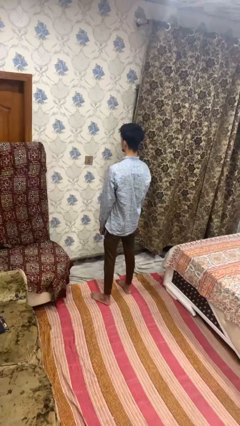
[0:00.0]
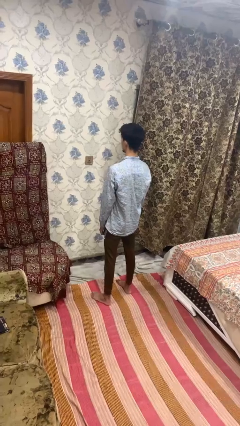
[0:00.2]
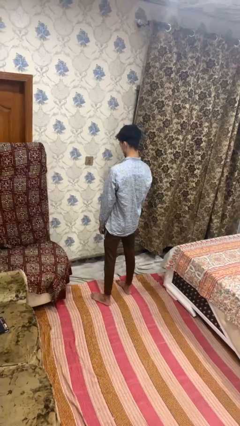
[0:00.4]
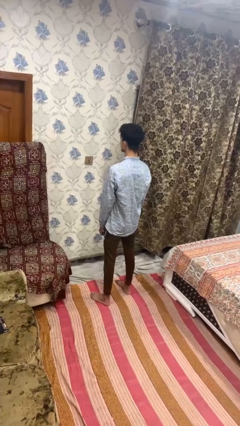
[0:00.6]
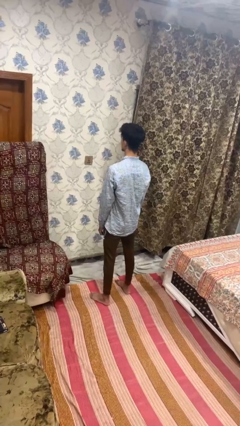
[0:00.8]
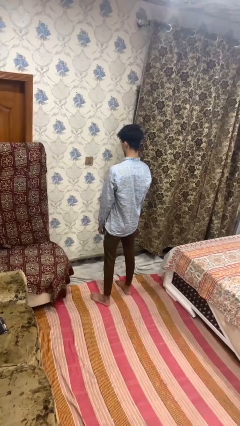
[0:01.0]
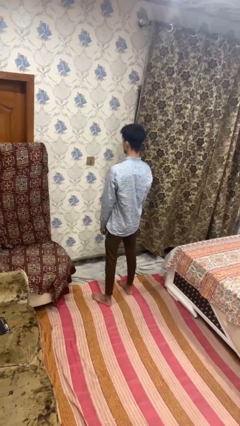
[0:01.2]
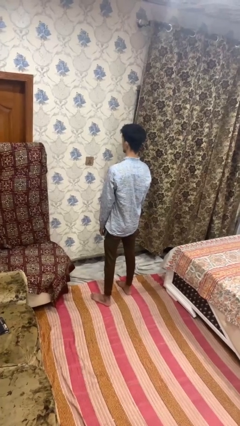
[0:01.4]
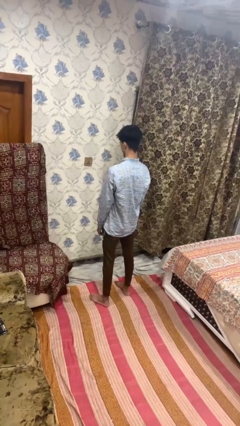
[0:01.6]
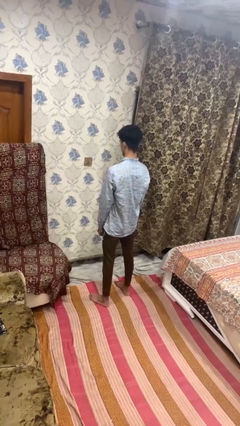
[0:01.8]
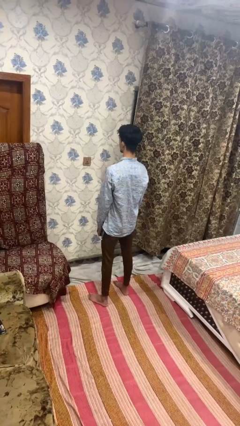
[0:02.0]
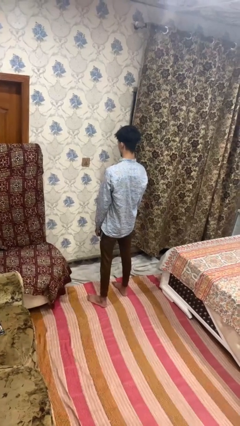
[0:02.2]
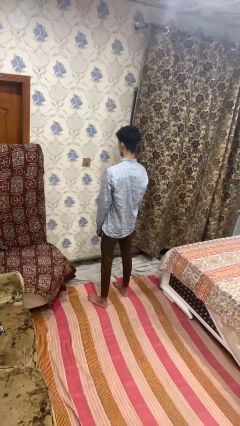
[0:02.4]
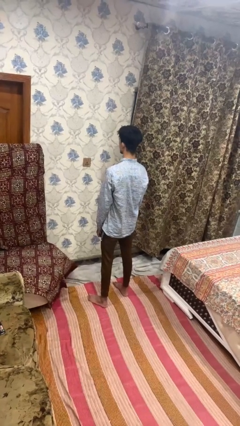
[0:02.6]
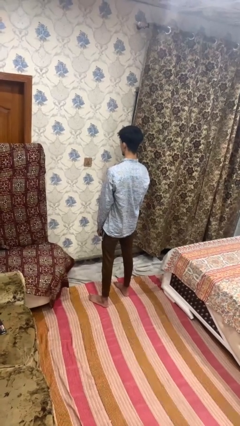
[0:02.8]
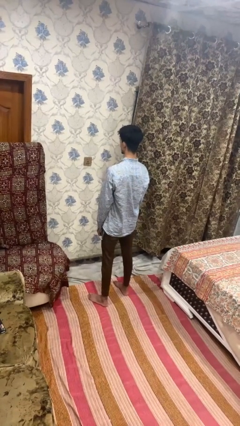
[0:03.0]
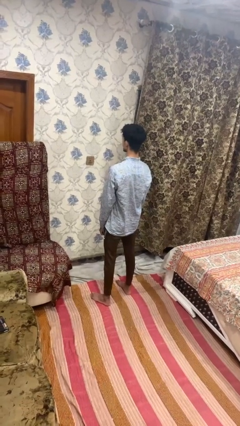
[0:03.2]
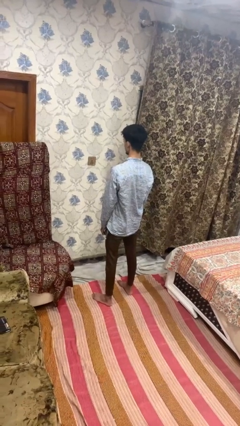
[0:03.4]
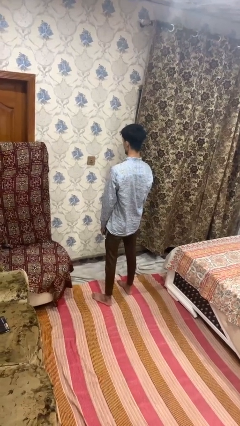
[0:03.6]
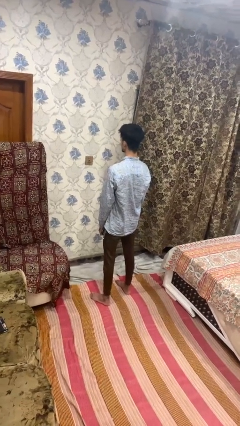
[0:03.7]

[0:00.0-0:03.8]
person nods head

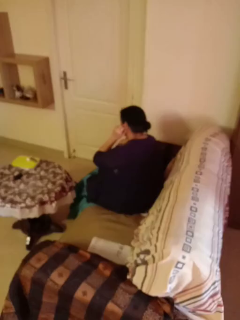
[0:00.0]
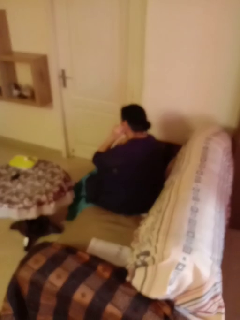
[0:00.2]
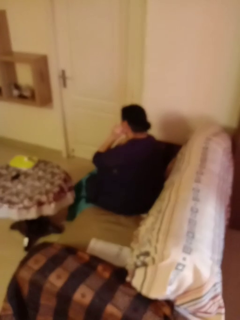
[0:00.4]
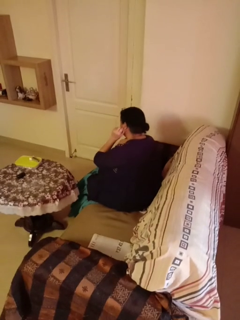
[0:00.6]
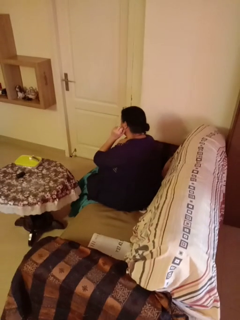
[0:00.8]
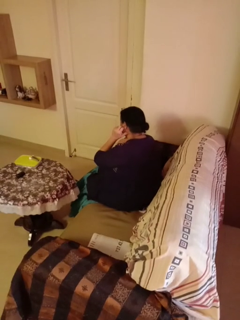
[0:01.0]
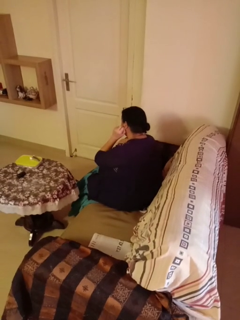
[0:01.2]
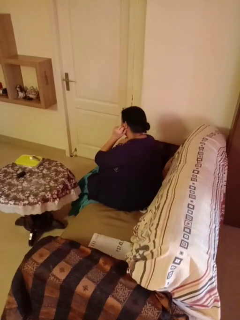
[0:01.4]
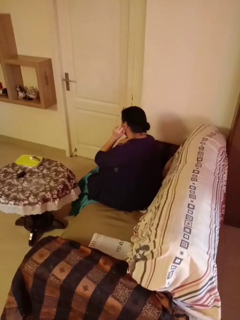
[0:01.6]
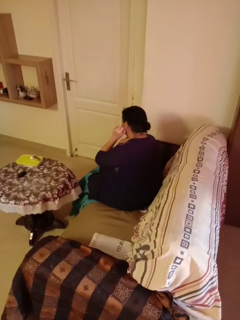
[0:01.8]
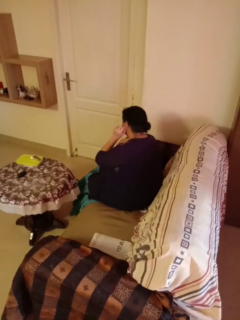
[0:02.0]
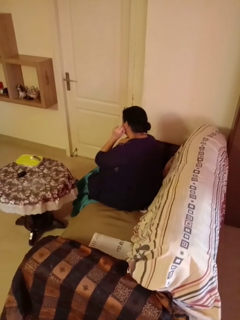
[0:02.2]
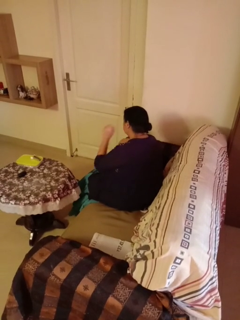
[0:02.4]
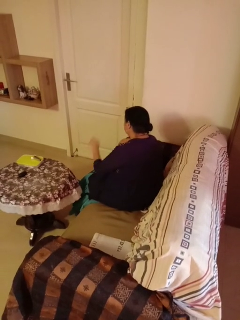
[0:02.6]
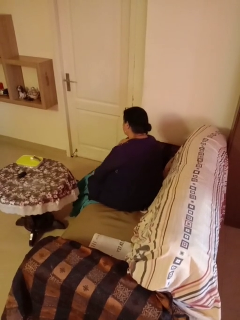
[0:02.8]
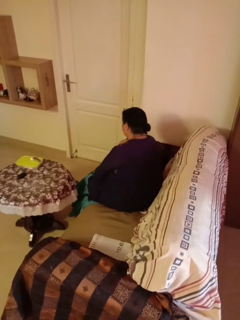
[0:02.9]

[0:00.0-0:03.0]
person touches earlobe

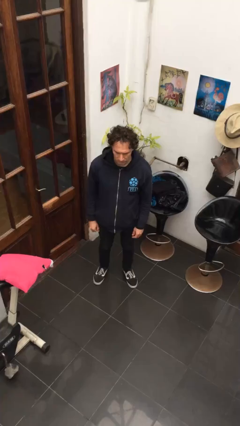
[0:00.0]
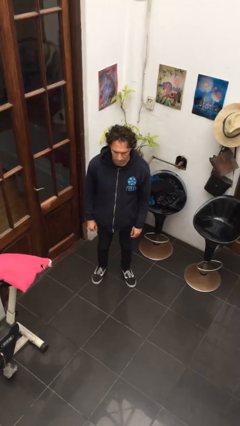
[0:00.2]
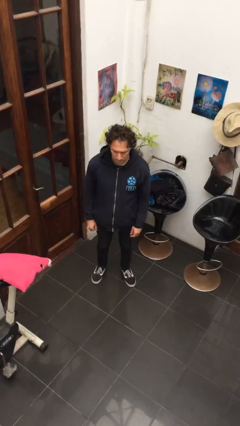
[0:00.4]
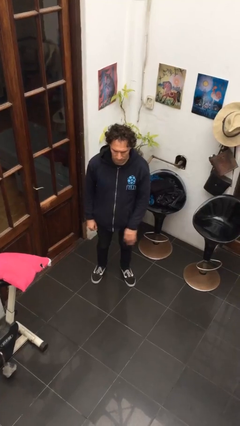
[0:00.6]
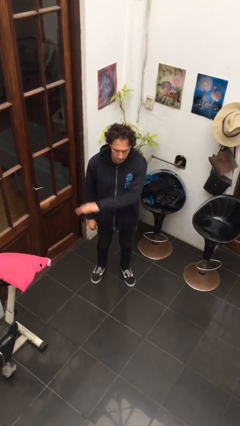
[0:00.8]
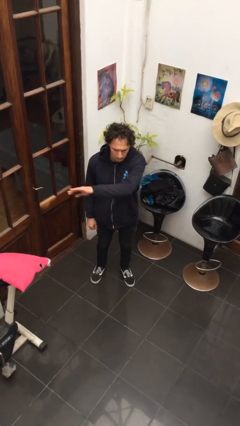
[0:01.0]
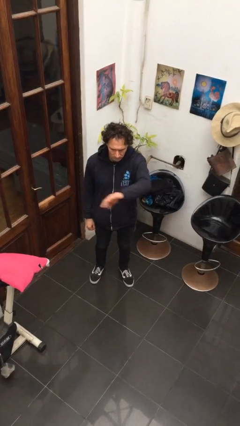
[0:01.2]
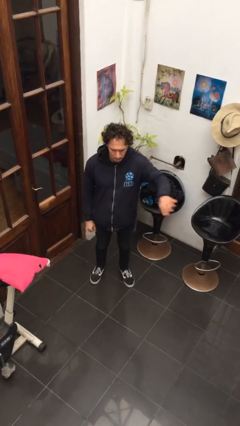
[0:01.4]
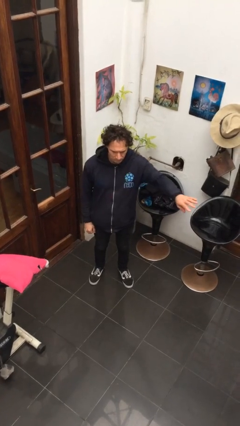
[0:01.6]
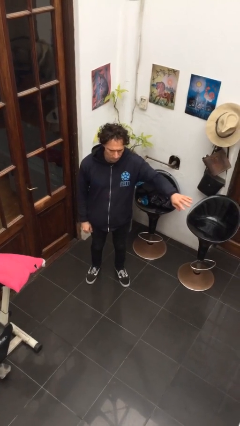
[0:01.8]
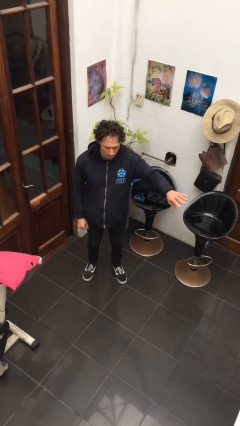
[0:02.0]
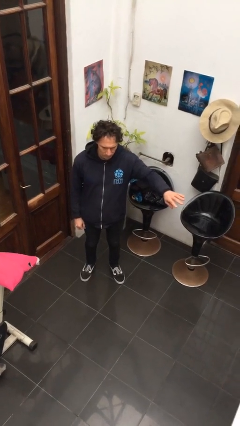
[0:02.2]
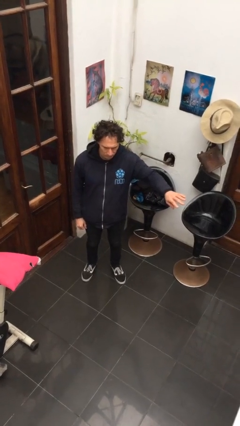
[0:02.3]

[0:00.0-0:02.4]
person gestures swipe left

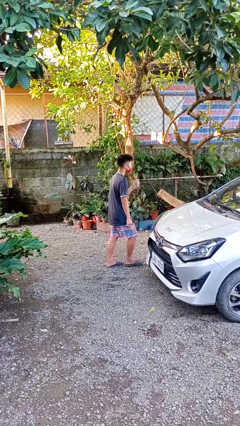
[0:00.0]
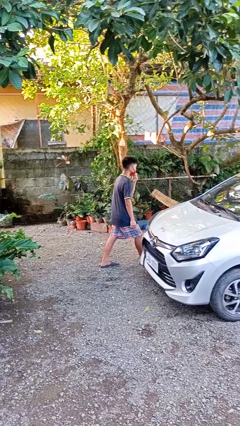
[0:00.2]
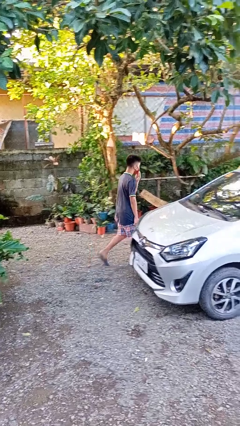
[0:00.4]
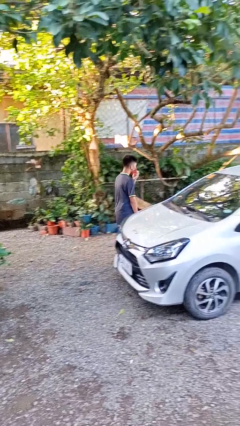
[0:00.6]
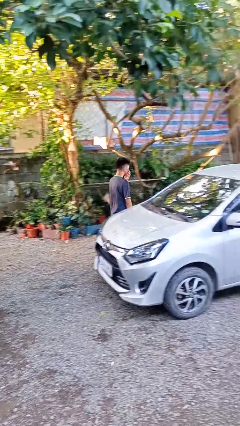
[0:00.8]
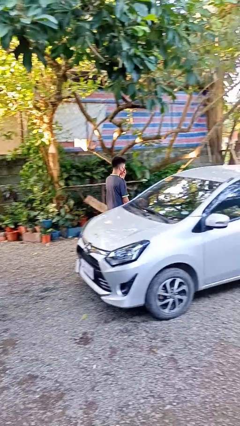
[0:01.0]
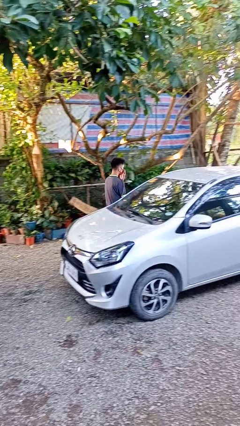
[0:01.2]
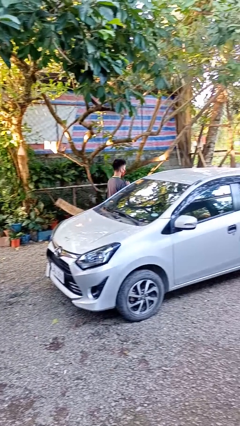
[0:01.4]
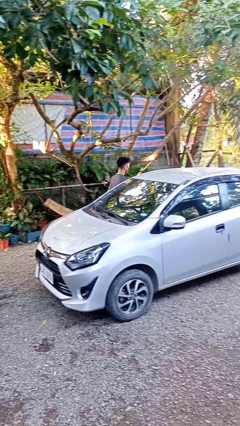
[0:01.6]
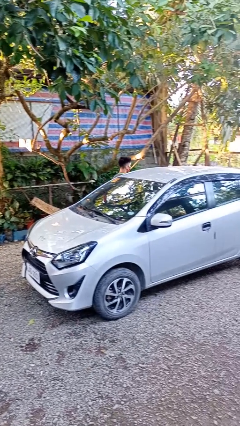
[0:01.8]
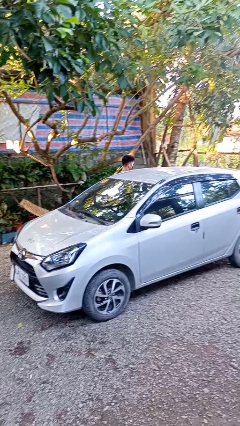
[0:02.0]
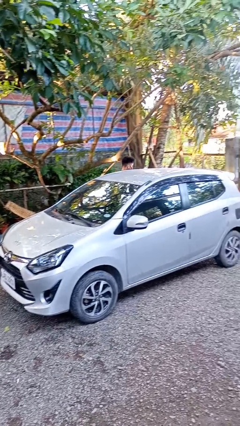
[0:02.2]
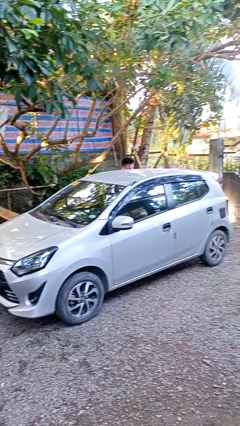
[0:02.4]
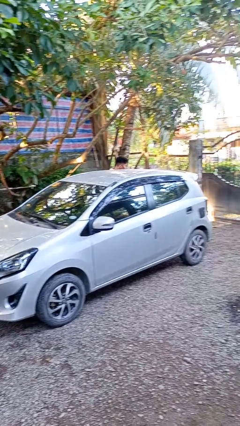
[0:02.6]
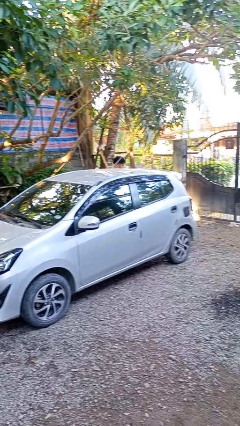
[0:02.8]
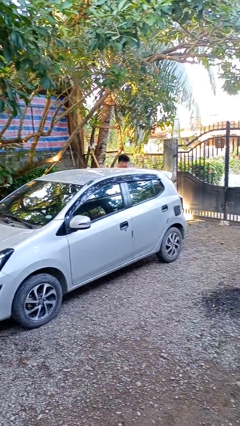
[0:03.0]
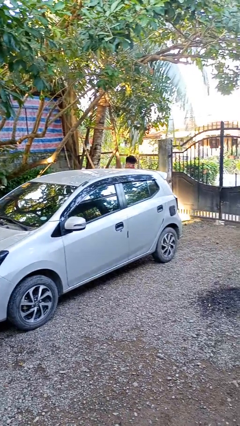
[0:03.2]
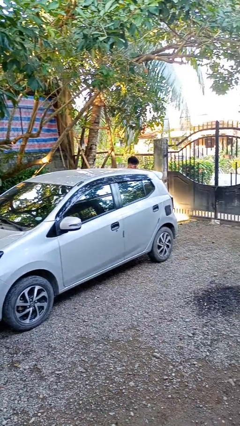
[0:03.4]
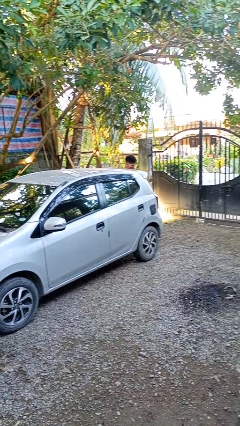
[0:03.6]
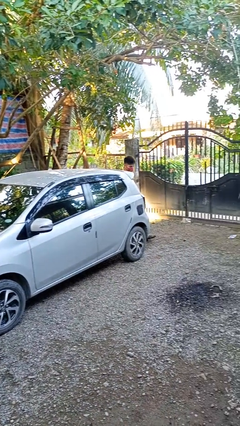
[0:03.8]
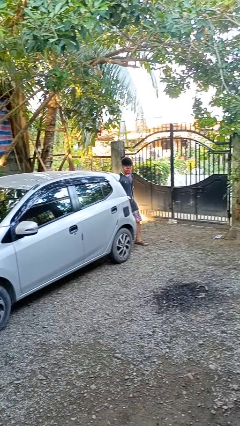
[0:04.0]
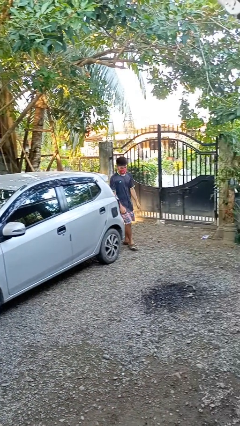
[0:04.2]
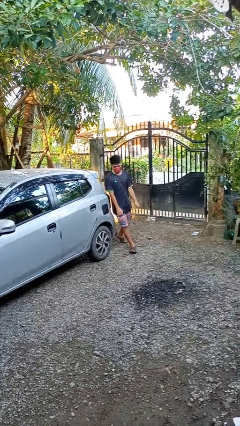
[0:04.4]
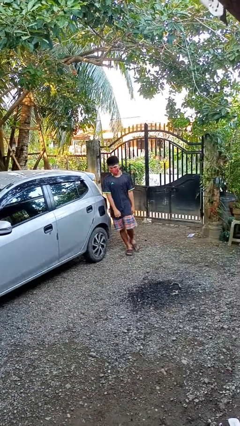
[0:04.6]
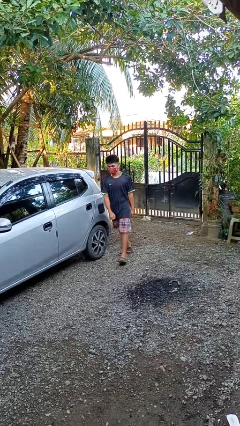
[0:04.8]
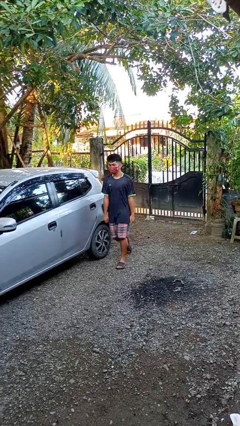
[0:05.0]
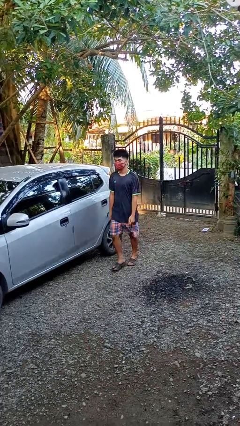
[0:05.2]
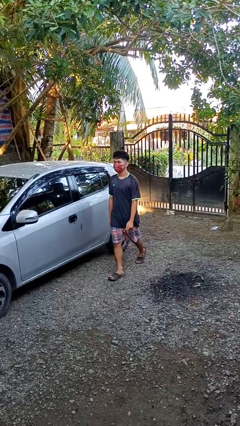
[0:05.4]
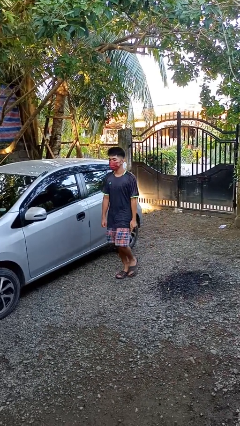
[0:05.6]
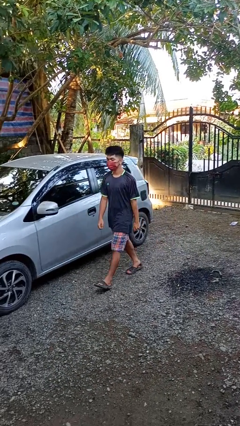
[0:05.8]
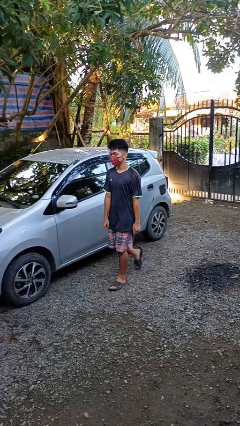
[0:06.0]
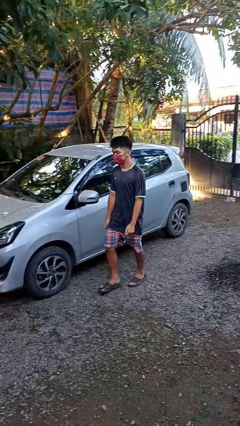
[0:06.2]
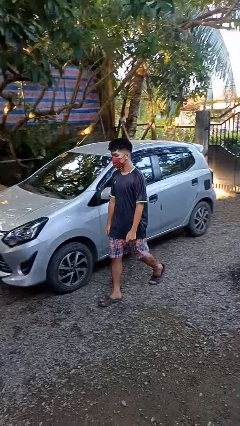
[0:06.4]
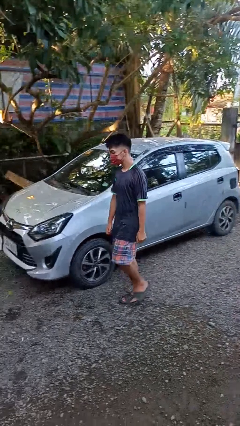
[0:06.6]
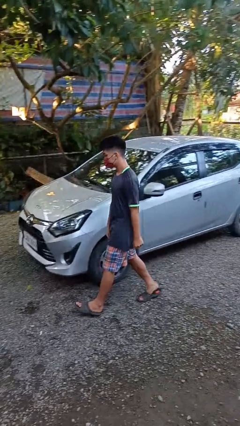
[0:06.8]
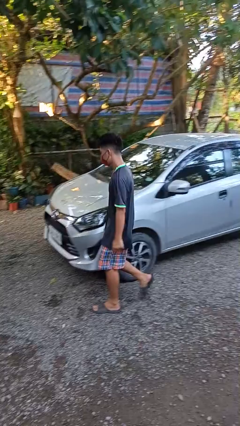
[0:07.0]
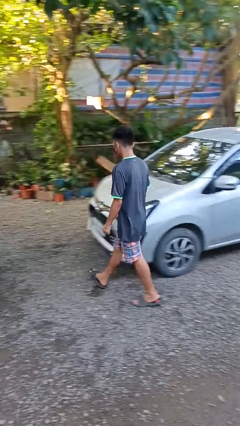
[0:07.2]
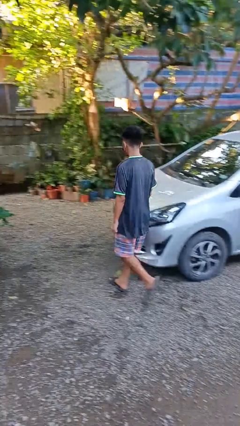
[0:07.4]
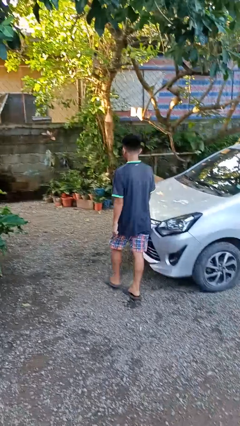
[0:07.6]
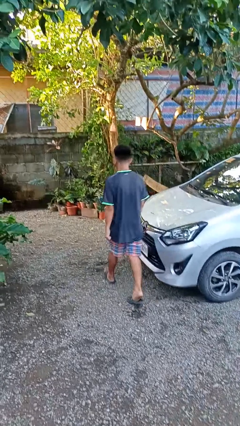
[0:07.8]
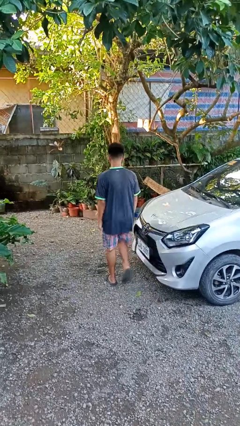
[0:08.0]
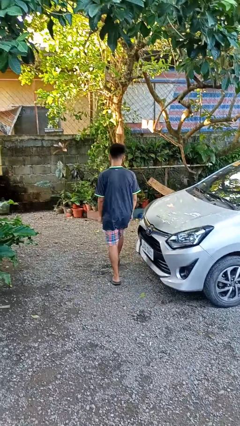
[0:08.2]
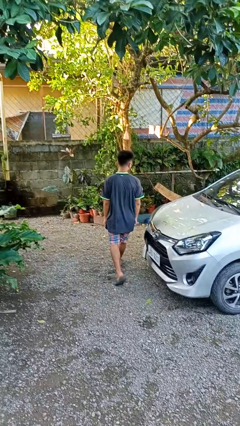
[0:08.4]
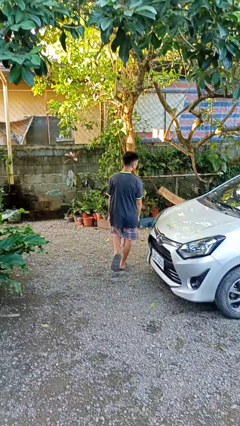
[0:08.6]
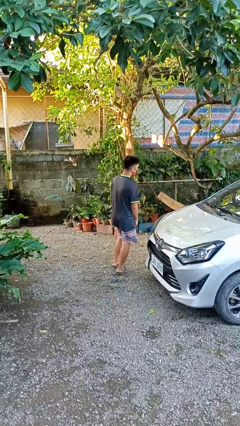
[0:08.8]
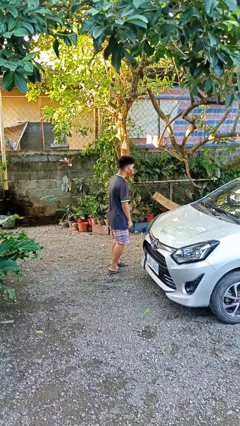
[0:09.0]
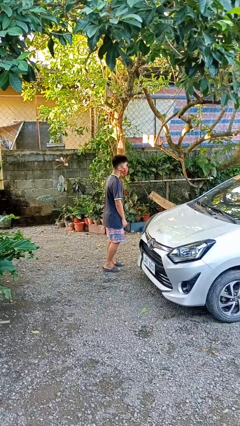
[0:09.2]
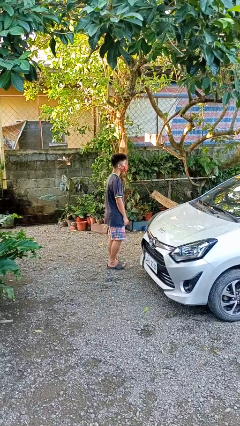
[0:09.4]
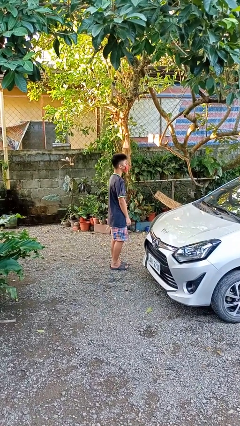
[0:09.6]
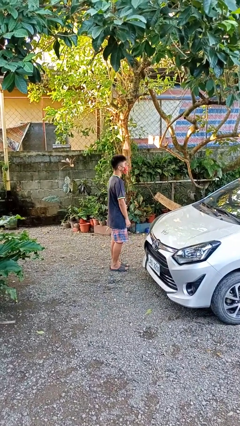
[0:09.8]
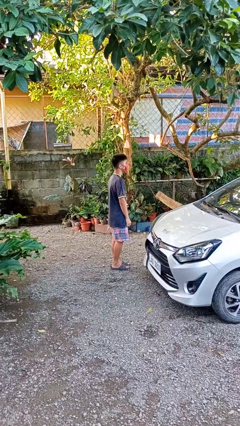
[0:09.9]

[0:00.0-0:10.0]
person walks around car
